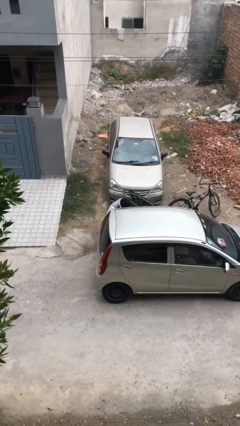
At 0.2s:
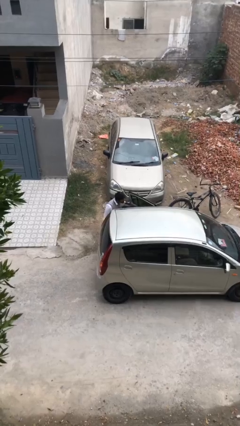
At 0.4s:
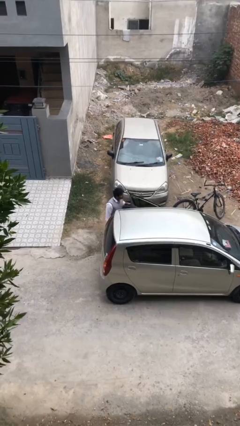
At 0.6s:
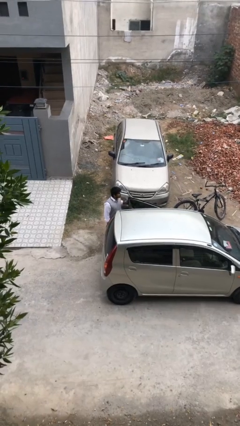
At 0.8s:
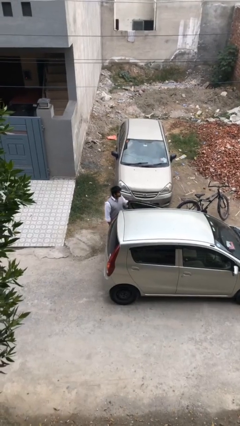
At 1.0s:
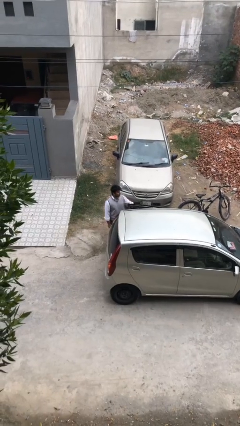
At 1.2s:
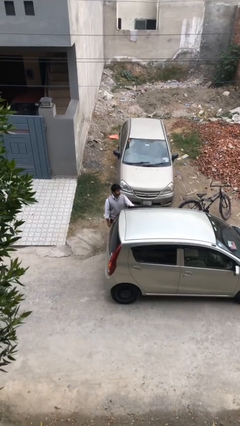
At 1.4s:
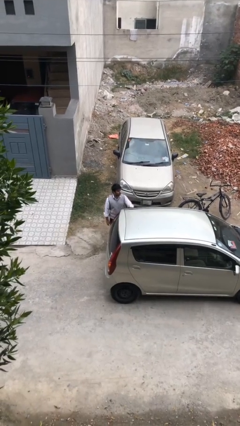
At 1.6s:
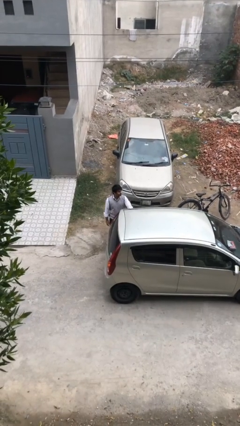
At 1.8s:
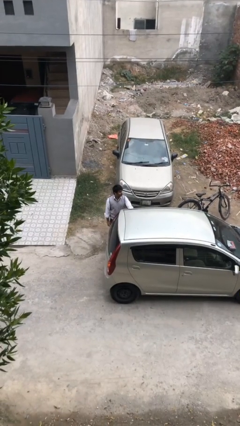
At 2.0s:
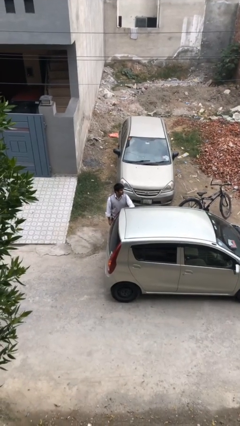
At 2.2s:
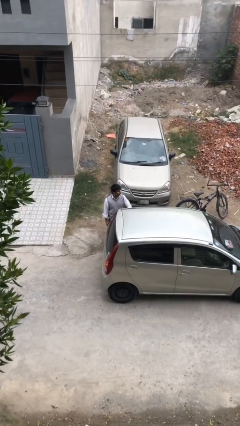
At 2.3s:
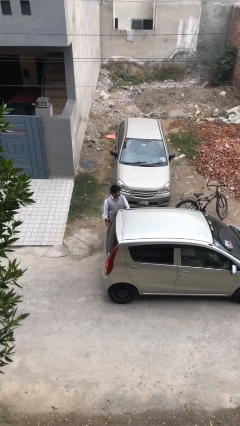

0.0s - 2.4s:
person closes car door

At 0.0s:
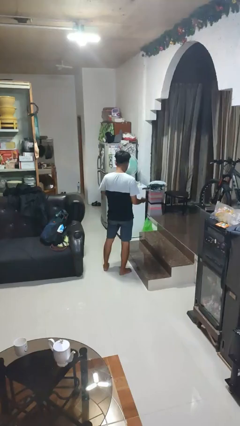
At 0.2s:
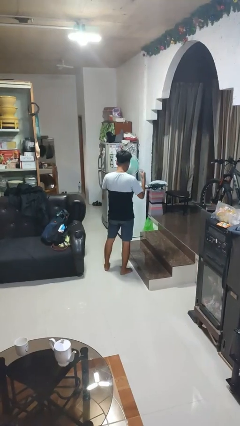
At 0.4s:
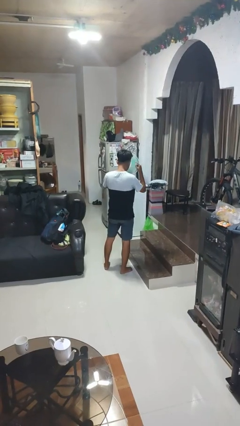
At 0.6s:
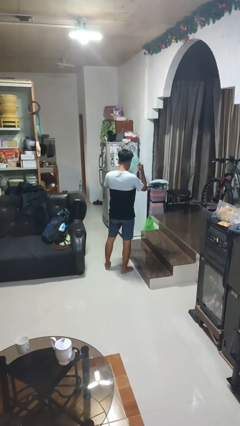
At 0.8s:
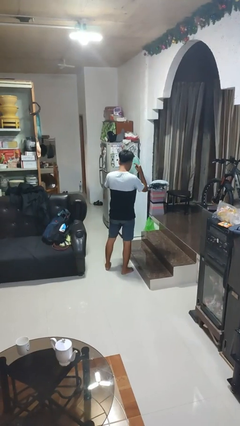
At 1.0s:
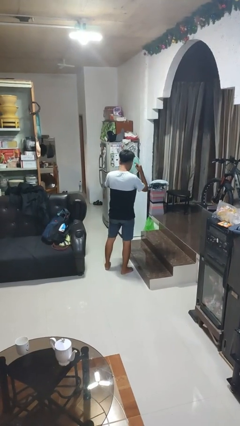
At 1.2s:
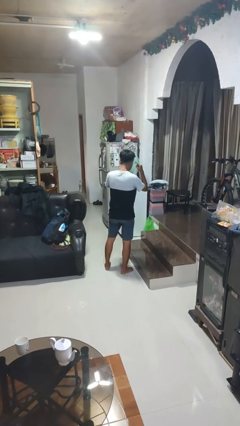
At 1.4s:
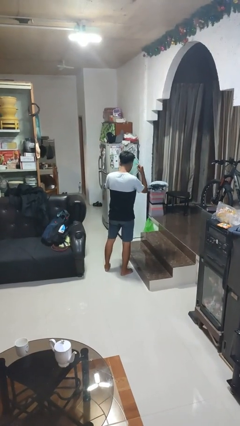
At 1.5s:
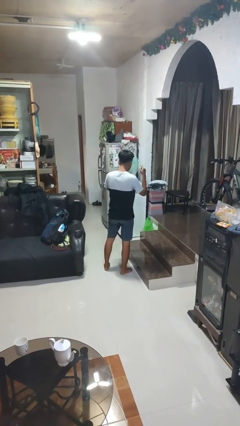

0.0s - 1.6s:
person gestures listen closely

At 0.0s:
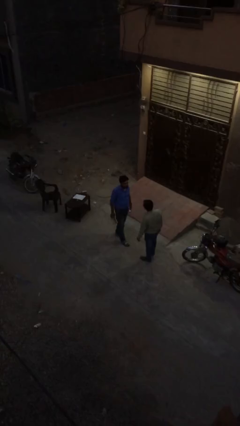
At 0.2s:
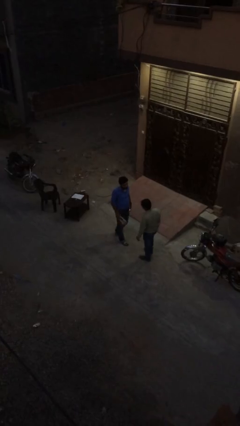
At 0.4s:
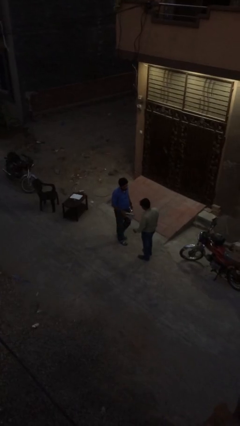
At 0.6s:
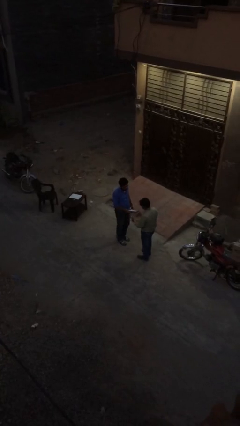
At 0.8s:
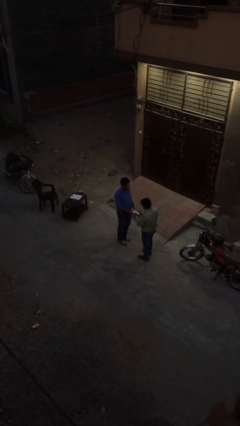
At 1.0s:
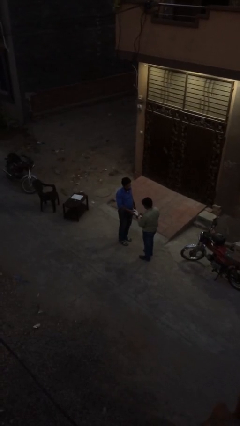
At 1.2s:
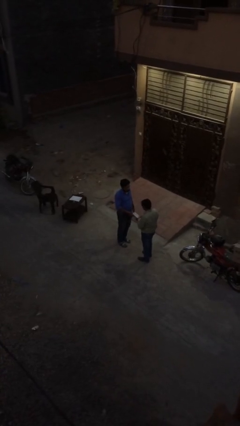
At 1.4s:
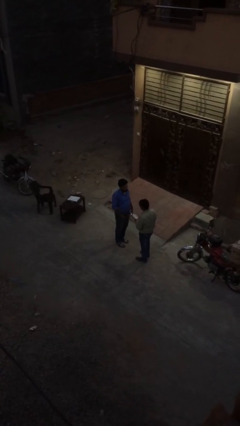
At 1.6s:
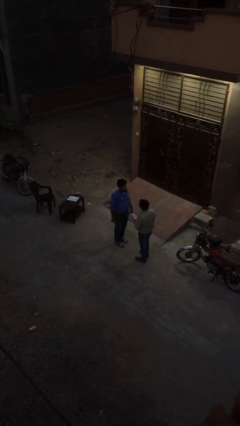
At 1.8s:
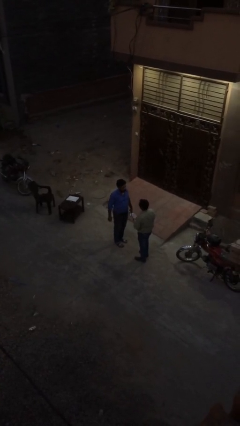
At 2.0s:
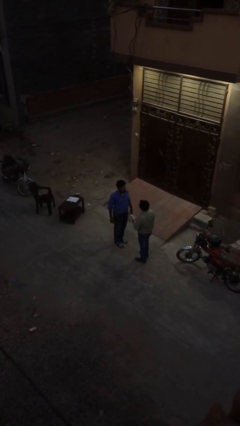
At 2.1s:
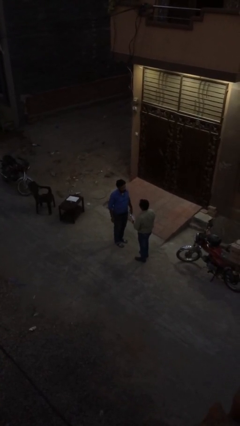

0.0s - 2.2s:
person transfers object to person

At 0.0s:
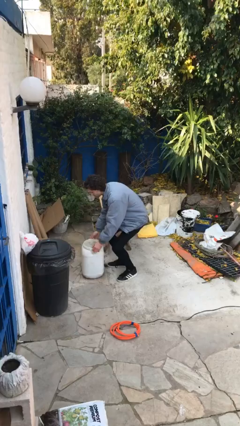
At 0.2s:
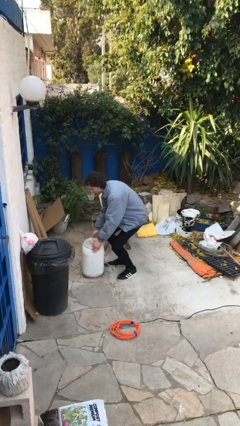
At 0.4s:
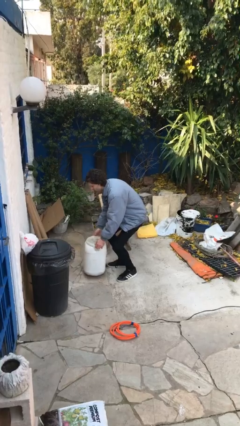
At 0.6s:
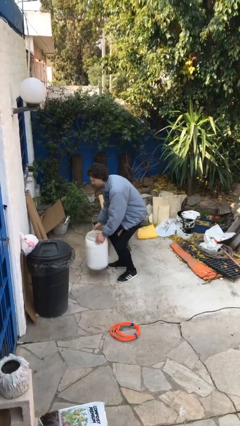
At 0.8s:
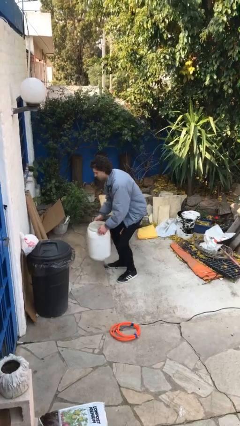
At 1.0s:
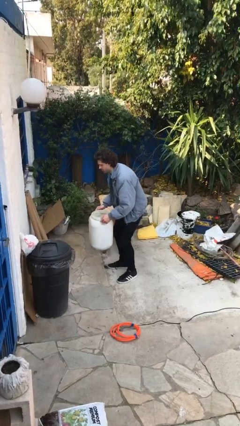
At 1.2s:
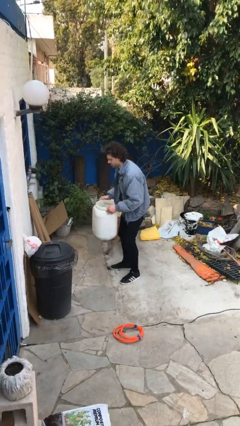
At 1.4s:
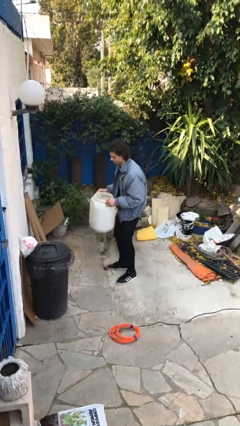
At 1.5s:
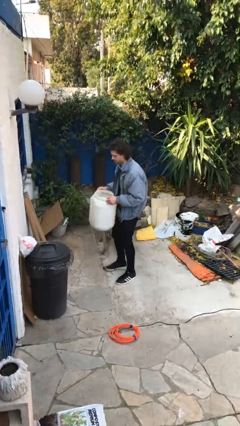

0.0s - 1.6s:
person picks up object from floor

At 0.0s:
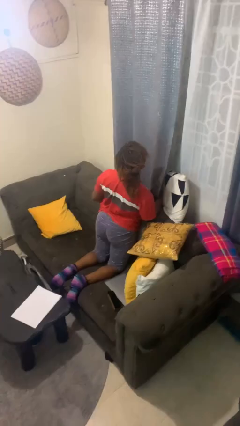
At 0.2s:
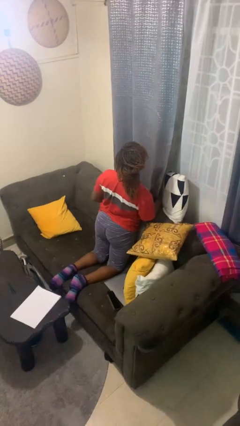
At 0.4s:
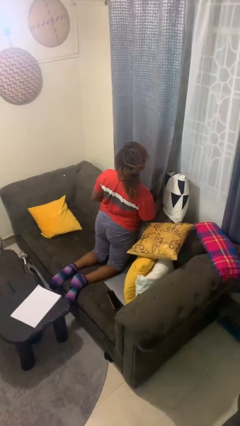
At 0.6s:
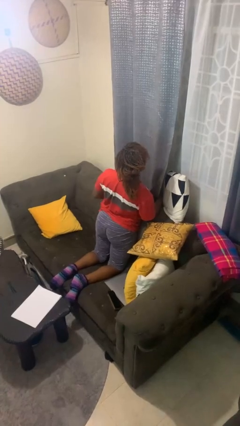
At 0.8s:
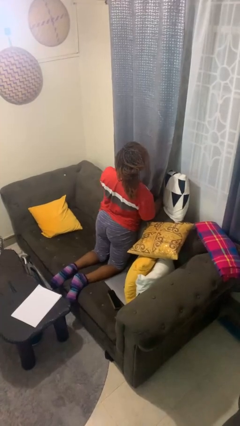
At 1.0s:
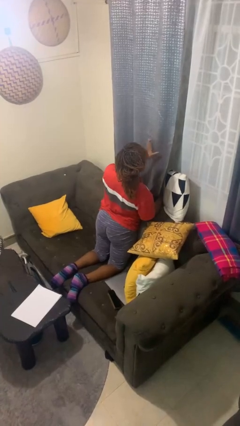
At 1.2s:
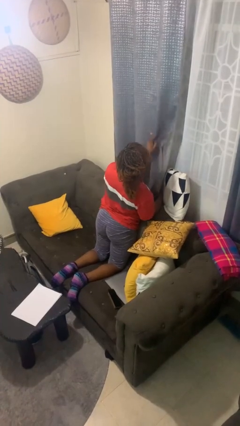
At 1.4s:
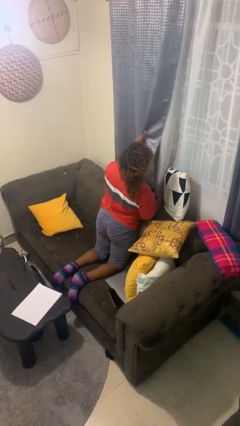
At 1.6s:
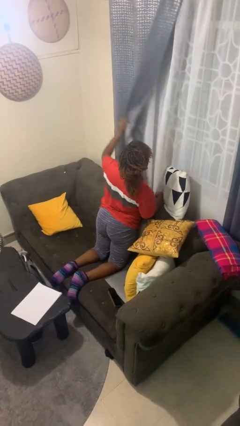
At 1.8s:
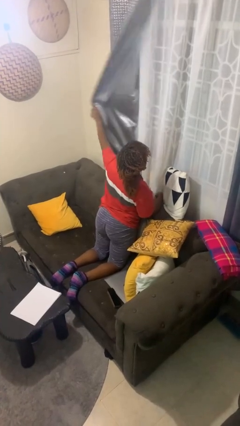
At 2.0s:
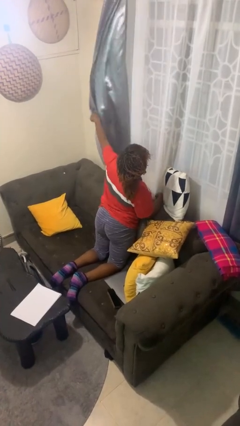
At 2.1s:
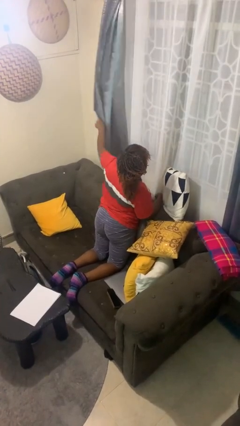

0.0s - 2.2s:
person opens curtains

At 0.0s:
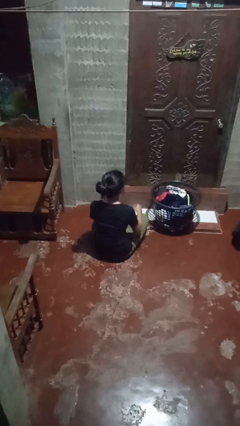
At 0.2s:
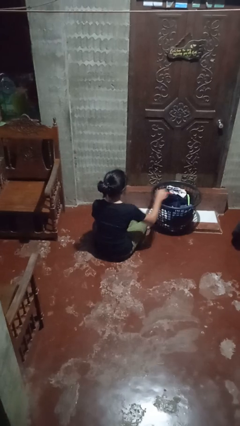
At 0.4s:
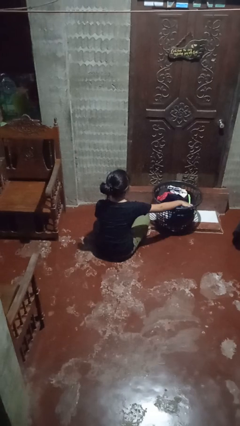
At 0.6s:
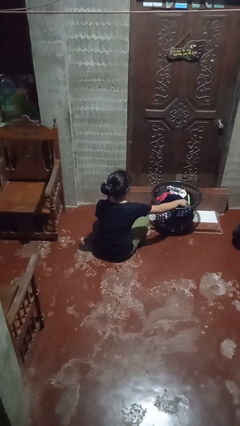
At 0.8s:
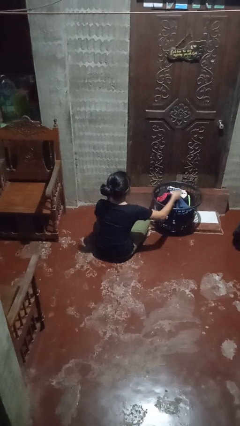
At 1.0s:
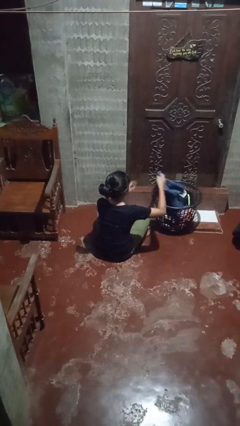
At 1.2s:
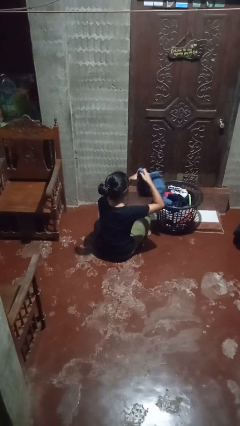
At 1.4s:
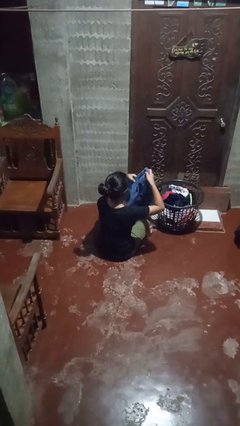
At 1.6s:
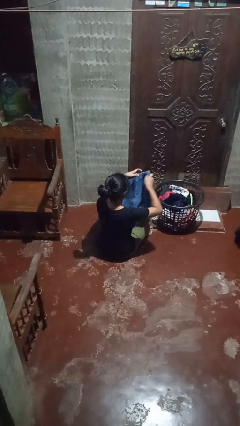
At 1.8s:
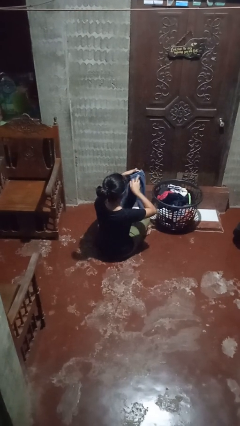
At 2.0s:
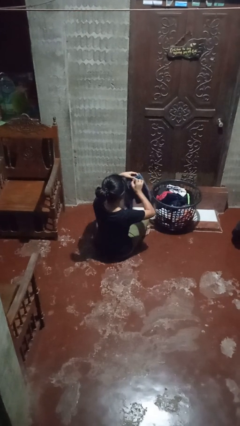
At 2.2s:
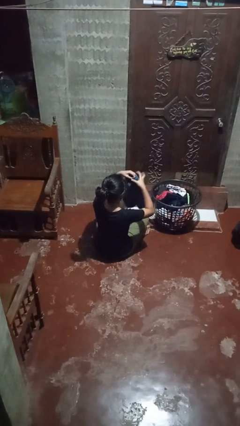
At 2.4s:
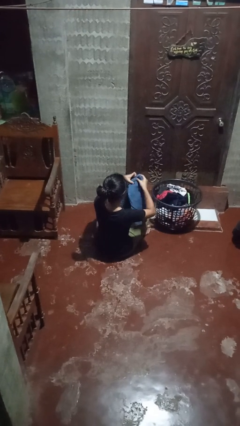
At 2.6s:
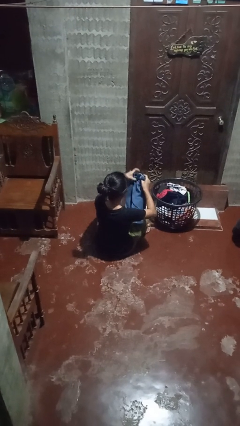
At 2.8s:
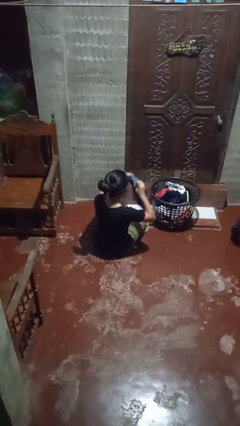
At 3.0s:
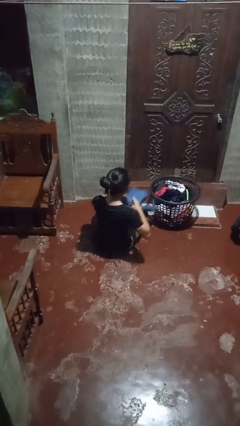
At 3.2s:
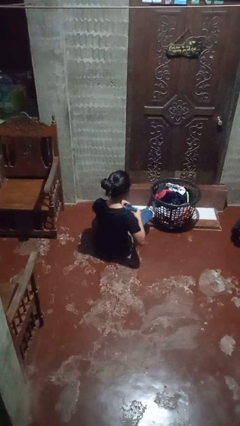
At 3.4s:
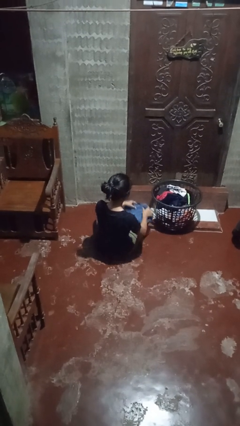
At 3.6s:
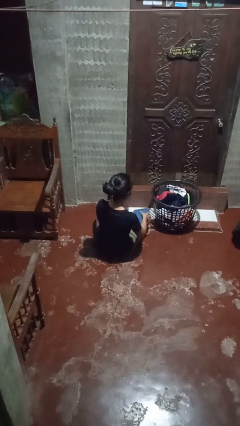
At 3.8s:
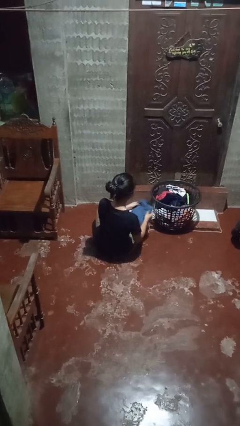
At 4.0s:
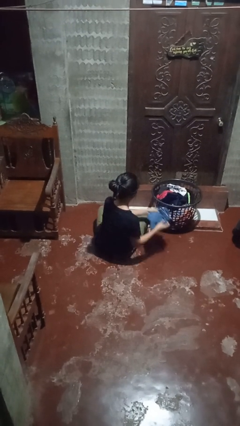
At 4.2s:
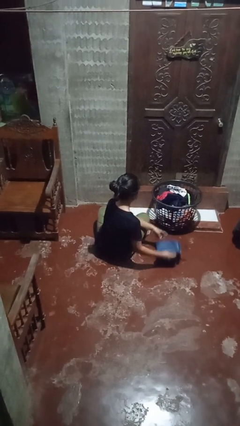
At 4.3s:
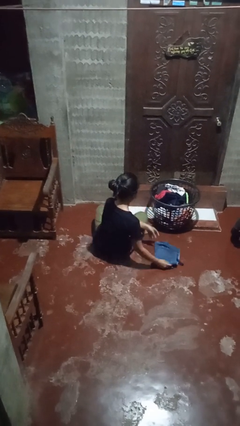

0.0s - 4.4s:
person folds pants

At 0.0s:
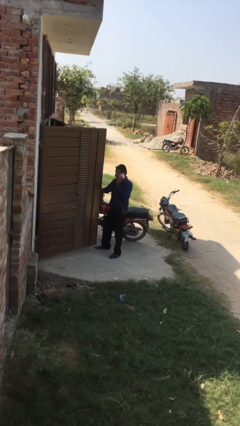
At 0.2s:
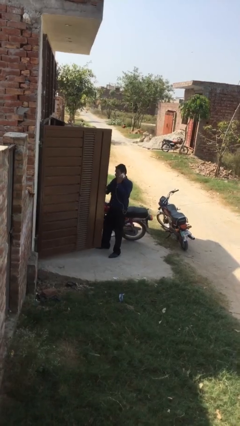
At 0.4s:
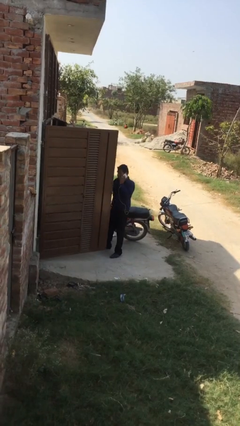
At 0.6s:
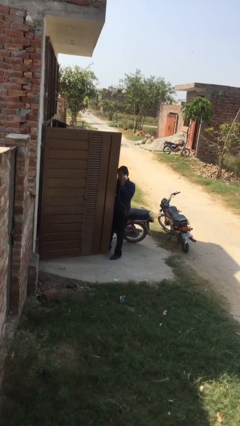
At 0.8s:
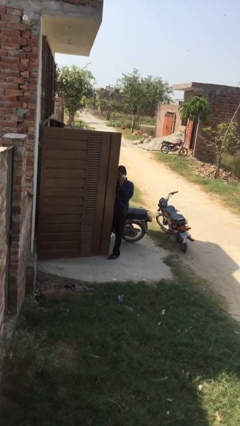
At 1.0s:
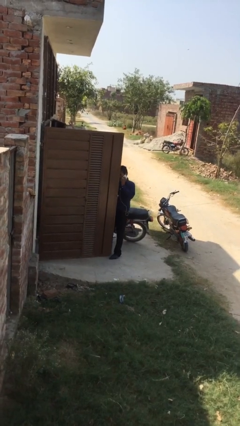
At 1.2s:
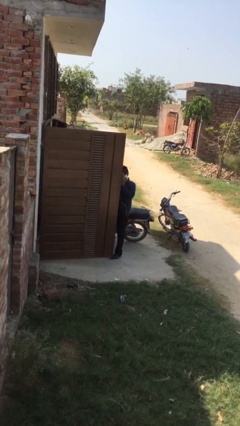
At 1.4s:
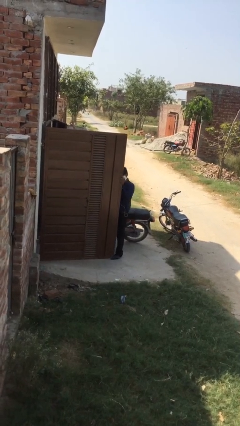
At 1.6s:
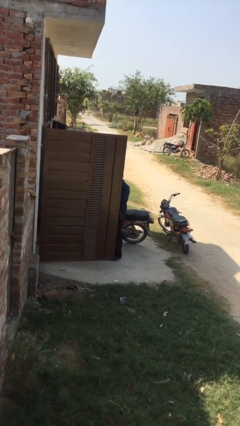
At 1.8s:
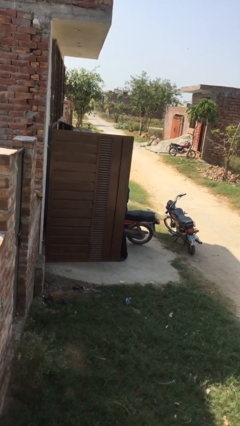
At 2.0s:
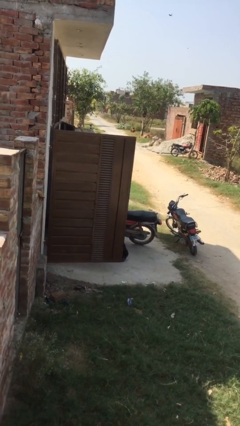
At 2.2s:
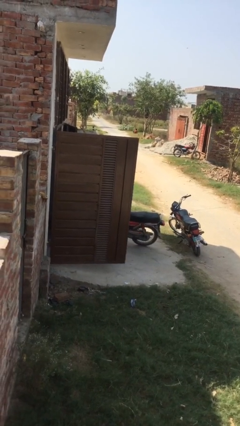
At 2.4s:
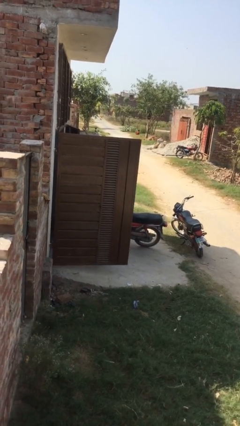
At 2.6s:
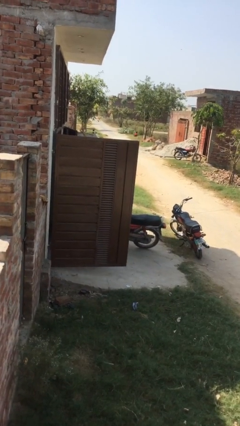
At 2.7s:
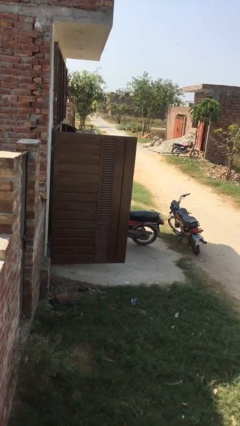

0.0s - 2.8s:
person exits scene through structure
